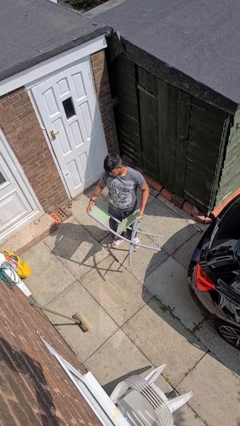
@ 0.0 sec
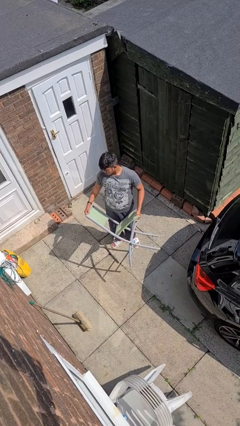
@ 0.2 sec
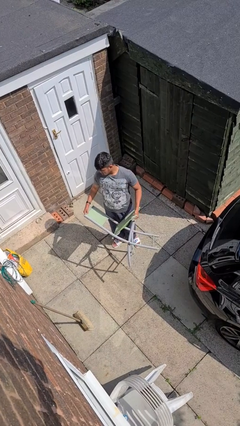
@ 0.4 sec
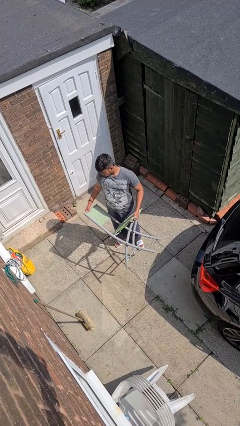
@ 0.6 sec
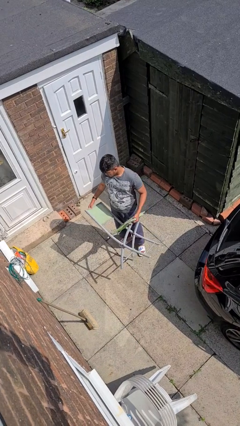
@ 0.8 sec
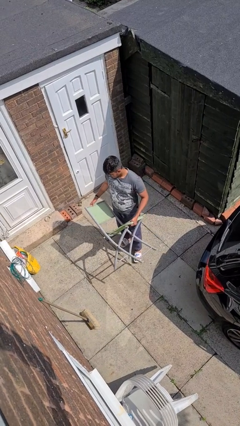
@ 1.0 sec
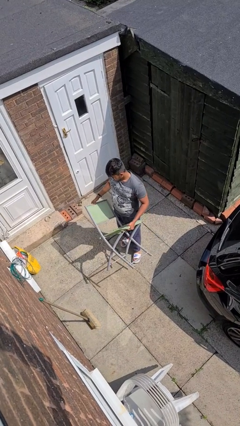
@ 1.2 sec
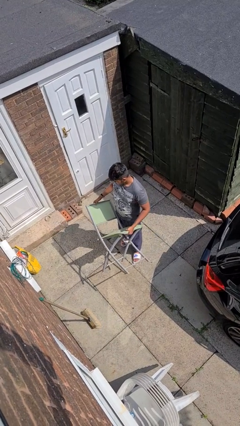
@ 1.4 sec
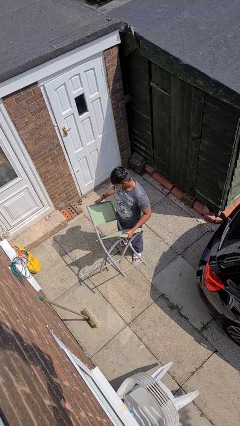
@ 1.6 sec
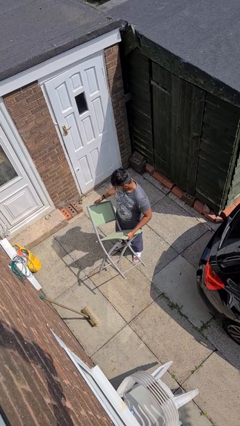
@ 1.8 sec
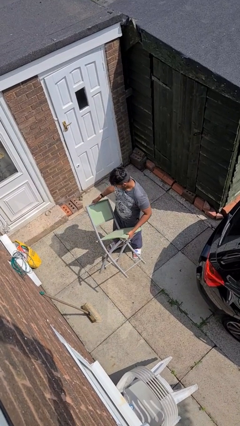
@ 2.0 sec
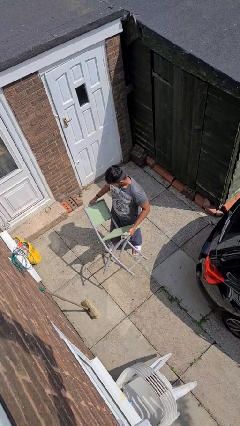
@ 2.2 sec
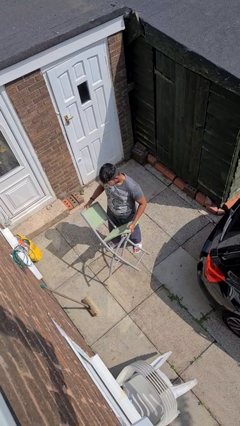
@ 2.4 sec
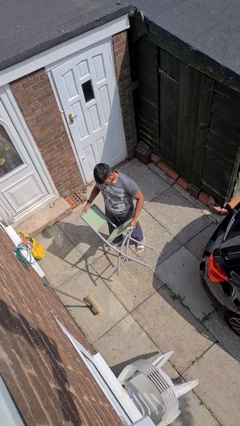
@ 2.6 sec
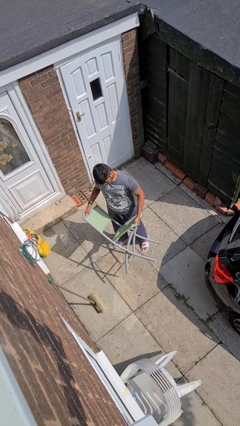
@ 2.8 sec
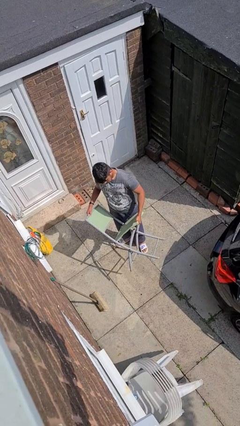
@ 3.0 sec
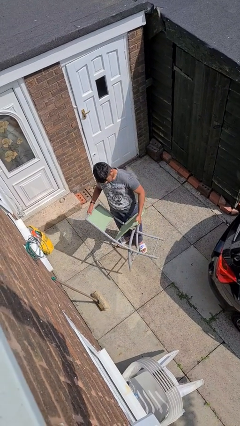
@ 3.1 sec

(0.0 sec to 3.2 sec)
person carries furniture

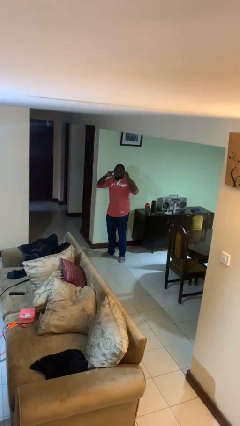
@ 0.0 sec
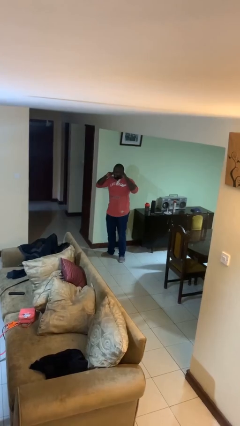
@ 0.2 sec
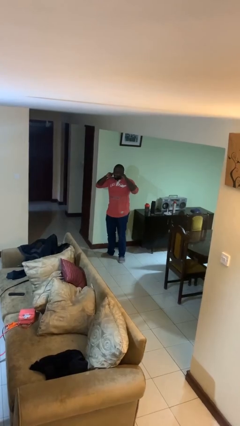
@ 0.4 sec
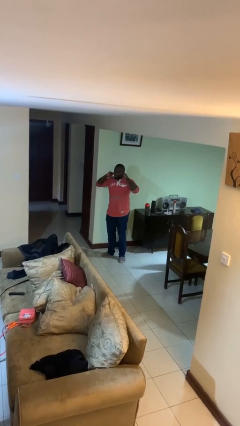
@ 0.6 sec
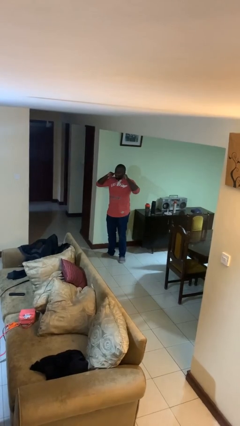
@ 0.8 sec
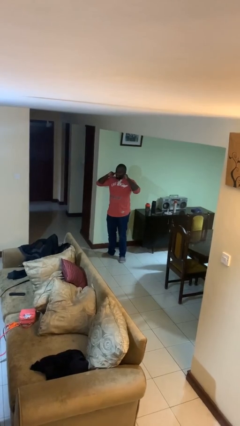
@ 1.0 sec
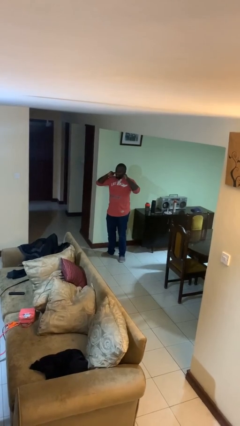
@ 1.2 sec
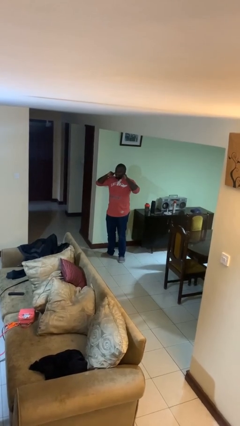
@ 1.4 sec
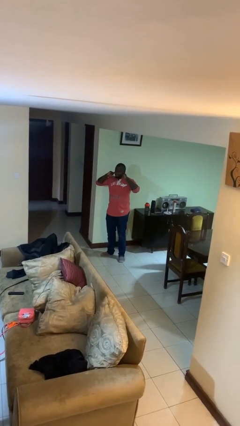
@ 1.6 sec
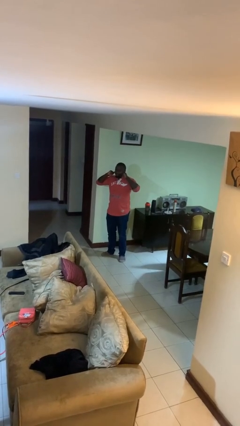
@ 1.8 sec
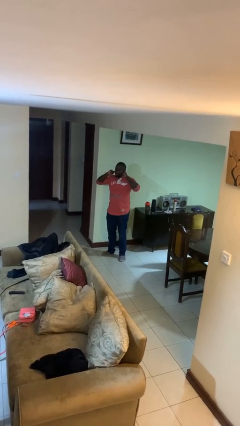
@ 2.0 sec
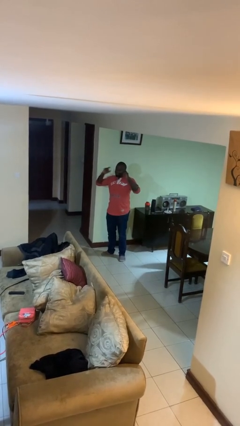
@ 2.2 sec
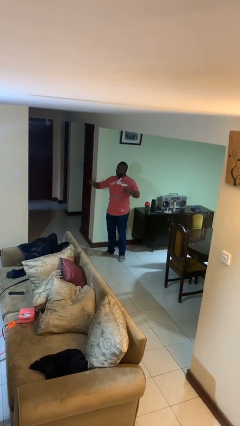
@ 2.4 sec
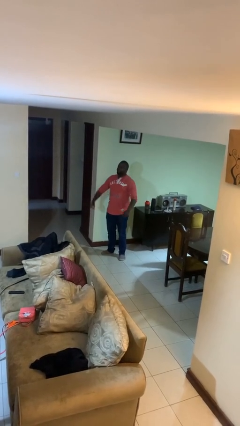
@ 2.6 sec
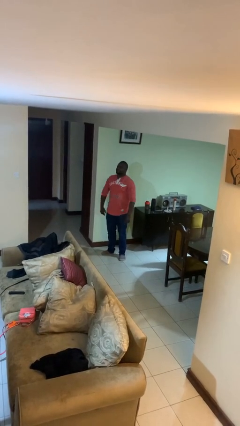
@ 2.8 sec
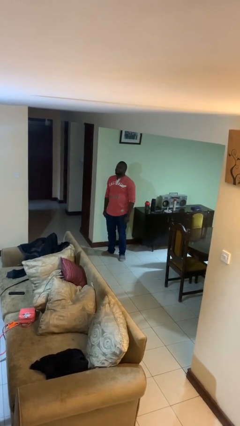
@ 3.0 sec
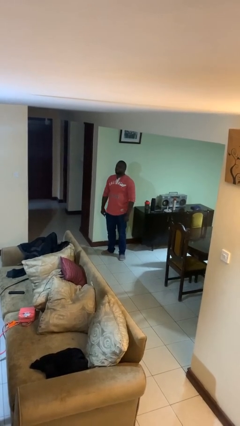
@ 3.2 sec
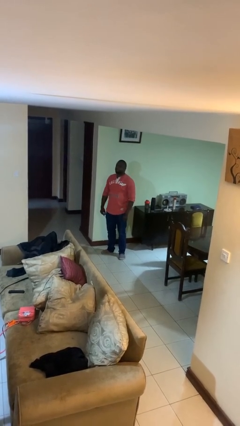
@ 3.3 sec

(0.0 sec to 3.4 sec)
person puts fingers in ear

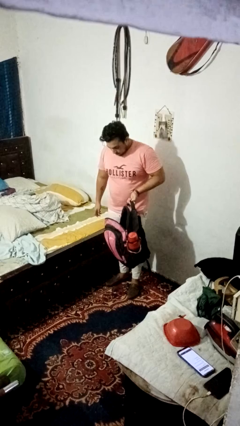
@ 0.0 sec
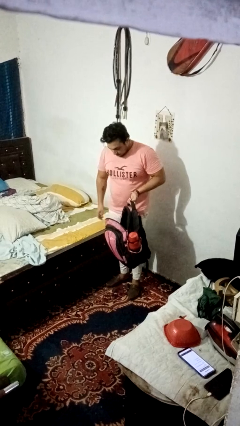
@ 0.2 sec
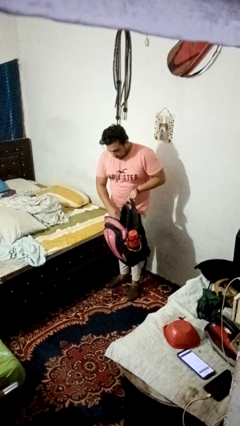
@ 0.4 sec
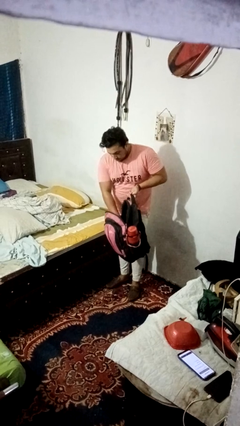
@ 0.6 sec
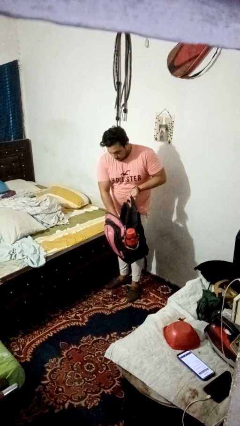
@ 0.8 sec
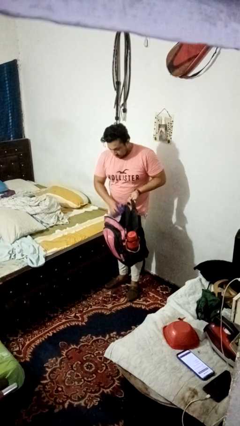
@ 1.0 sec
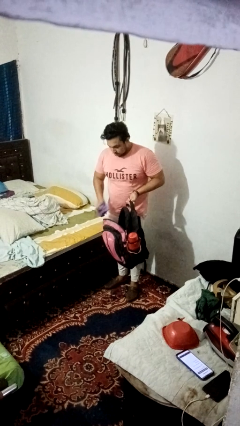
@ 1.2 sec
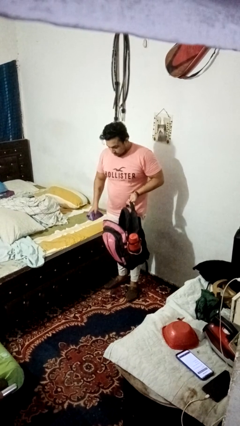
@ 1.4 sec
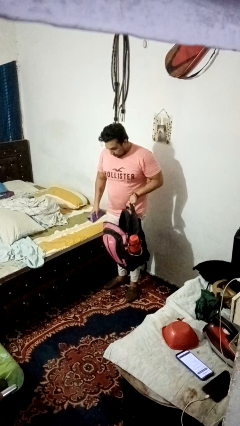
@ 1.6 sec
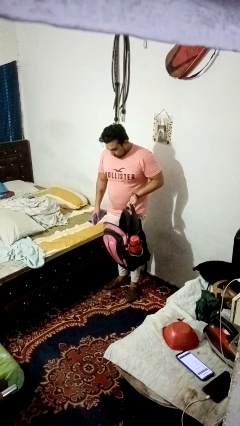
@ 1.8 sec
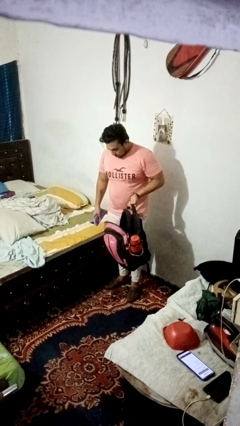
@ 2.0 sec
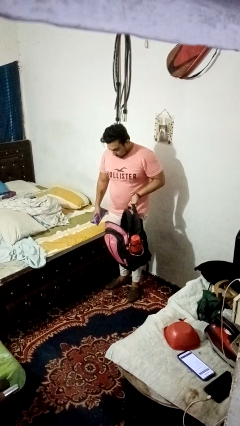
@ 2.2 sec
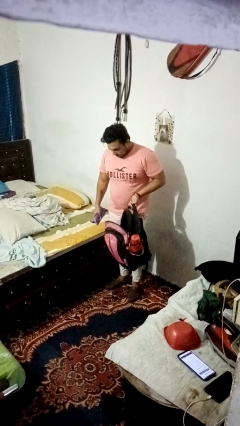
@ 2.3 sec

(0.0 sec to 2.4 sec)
person takes object from bag

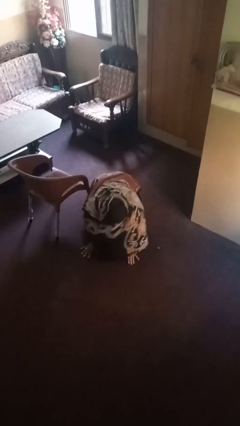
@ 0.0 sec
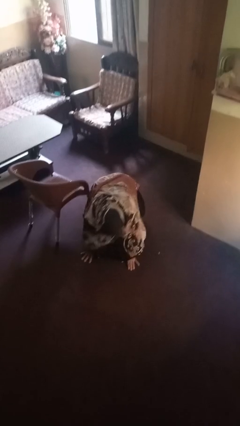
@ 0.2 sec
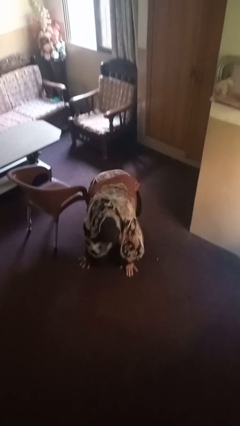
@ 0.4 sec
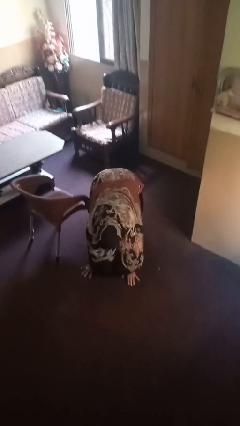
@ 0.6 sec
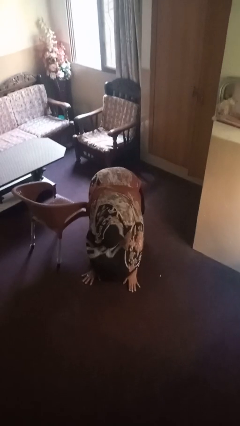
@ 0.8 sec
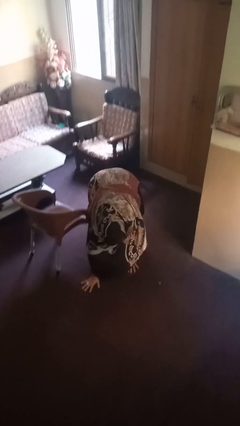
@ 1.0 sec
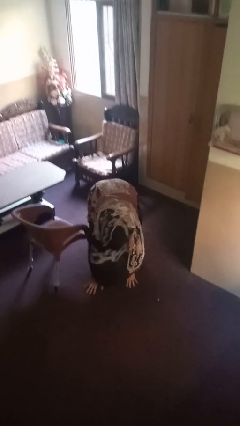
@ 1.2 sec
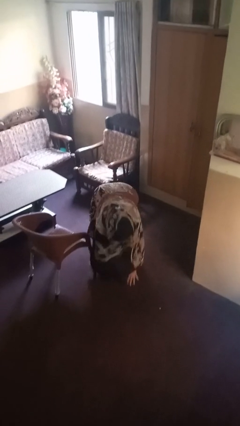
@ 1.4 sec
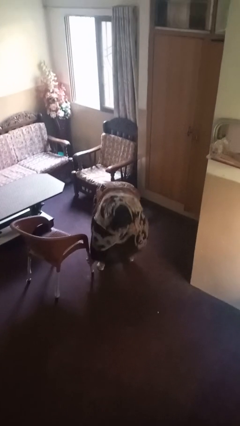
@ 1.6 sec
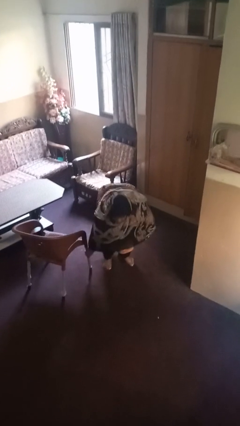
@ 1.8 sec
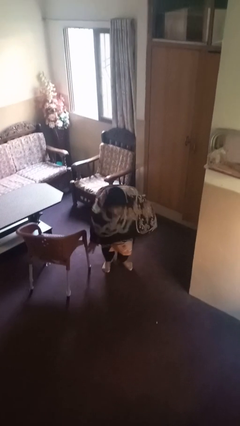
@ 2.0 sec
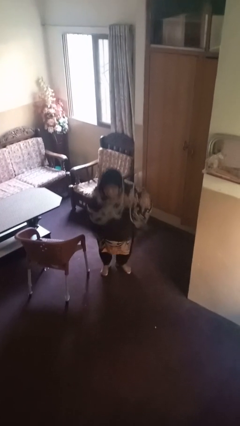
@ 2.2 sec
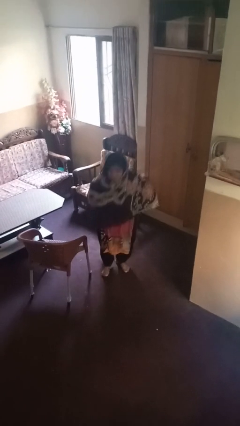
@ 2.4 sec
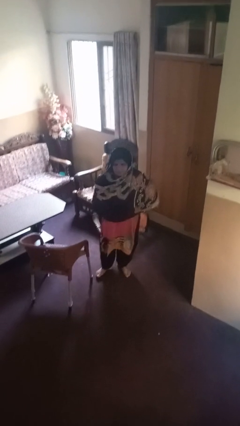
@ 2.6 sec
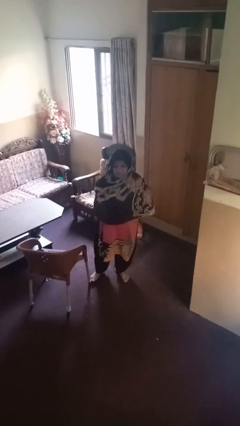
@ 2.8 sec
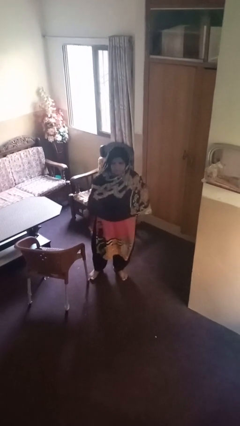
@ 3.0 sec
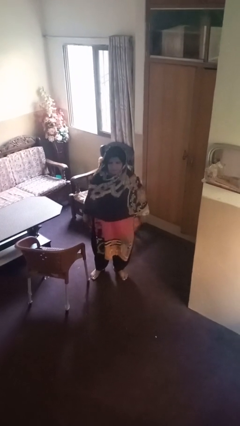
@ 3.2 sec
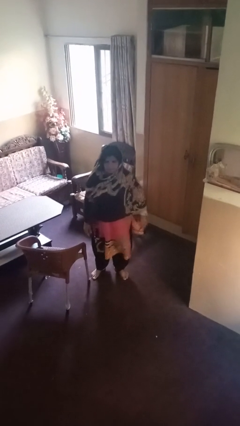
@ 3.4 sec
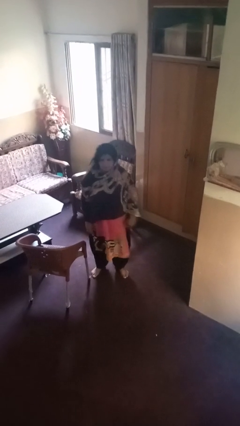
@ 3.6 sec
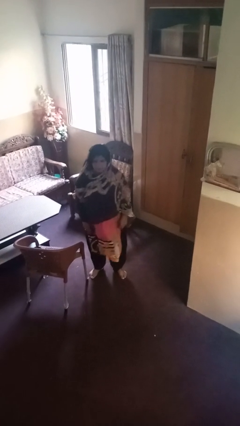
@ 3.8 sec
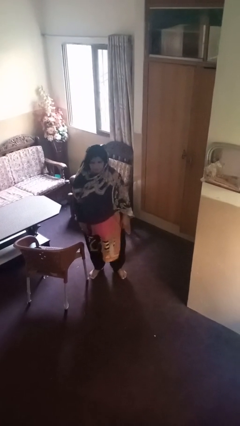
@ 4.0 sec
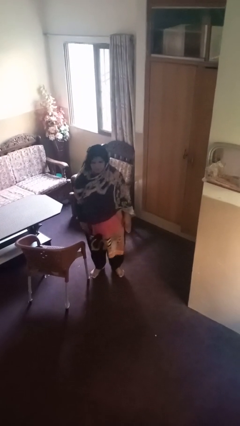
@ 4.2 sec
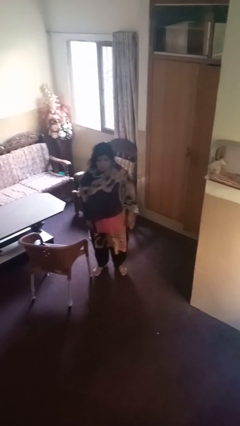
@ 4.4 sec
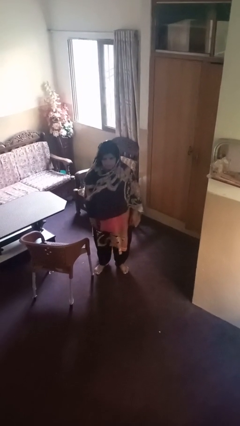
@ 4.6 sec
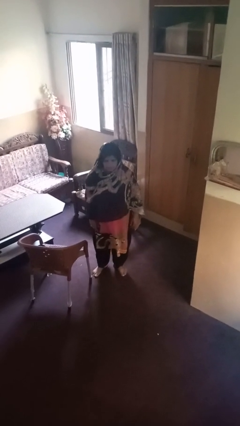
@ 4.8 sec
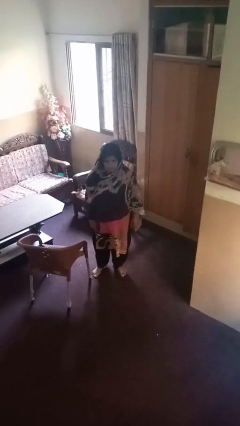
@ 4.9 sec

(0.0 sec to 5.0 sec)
person stands up from floor

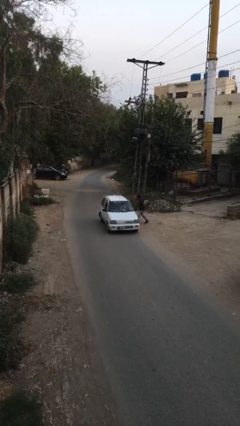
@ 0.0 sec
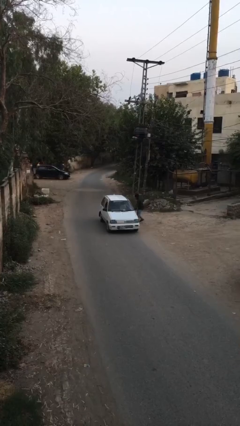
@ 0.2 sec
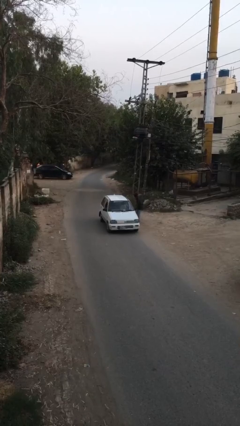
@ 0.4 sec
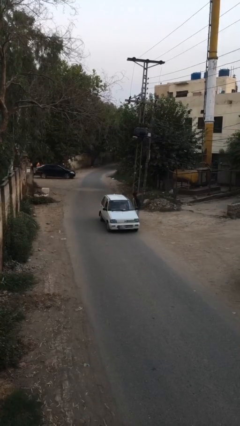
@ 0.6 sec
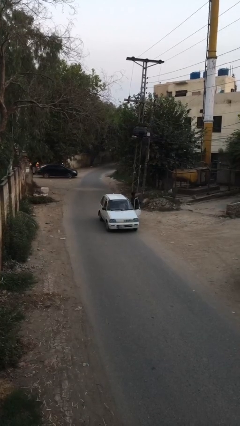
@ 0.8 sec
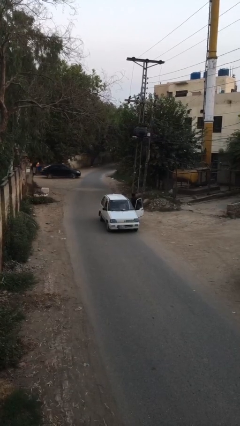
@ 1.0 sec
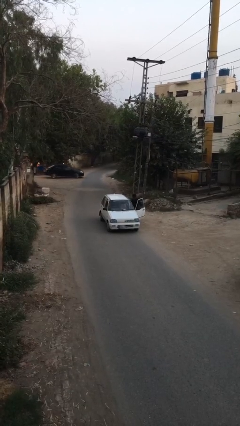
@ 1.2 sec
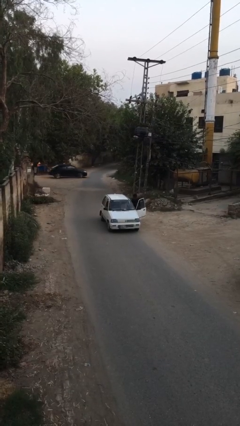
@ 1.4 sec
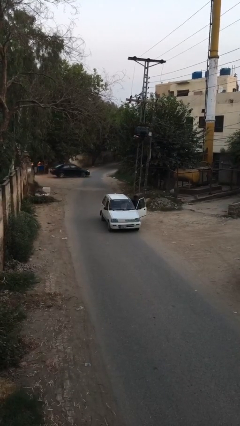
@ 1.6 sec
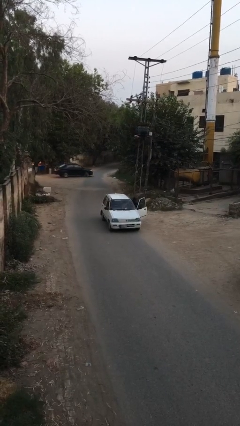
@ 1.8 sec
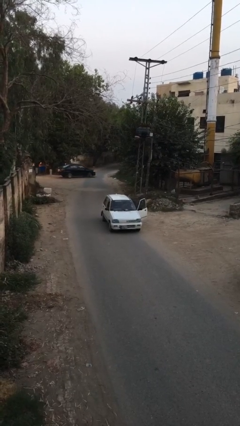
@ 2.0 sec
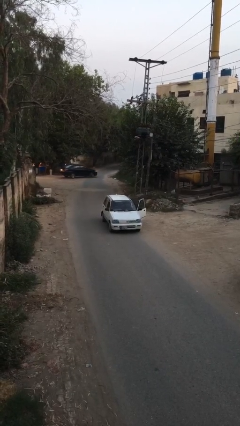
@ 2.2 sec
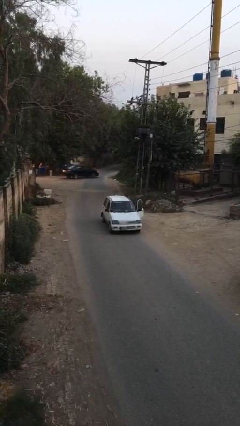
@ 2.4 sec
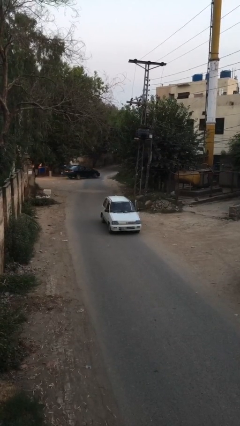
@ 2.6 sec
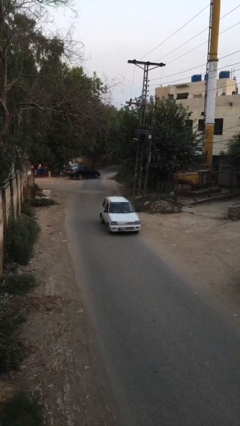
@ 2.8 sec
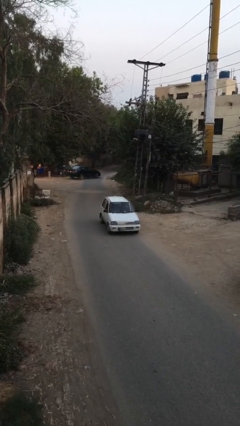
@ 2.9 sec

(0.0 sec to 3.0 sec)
car picks up person

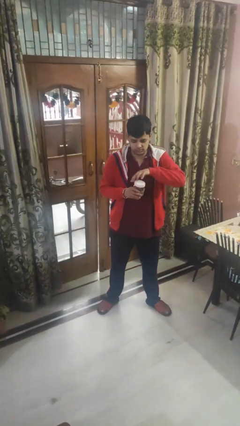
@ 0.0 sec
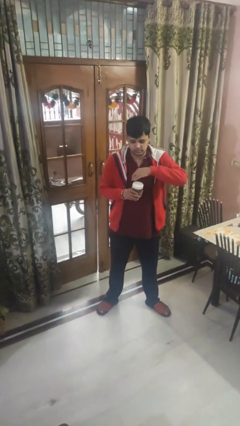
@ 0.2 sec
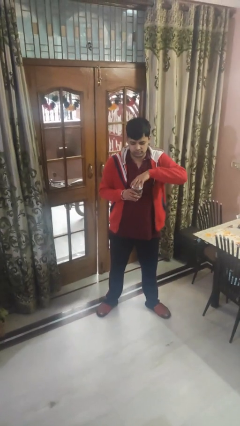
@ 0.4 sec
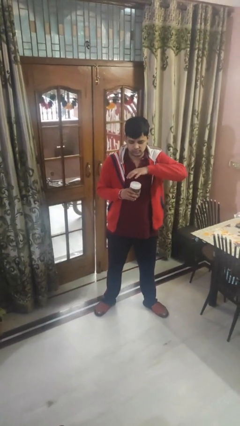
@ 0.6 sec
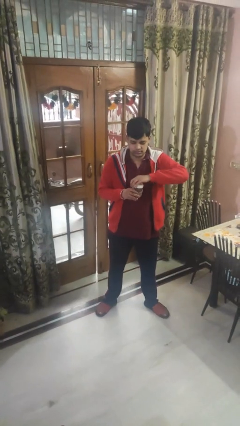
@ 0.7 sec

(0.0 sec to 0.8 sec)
person closes jar
